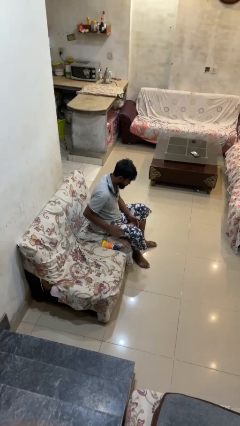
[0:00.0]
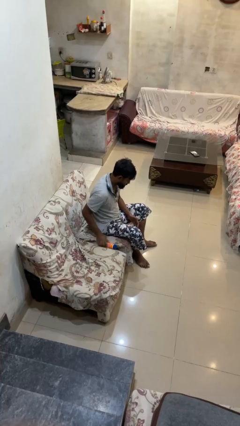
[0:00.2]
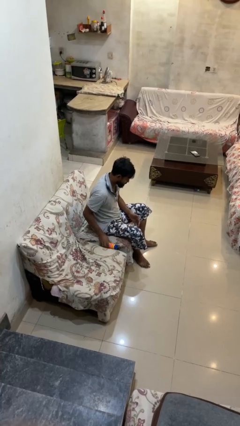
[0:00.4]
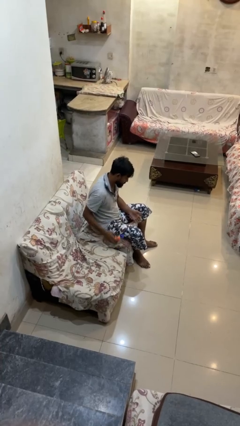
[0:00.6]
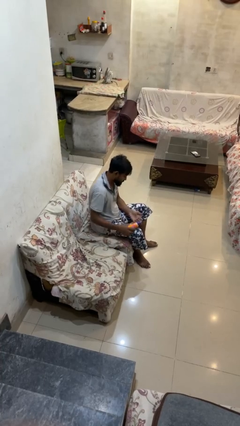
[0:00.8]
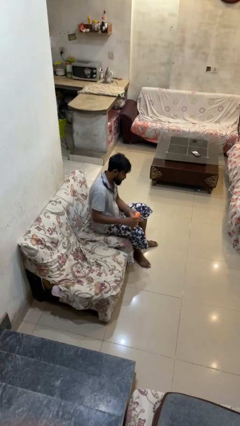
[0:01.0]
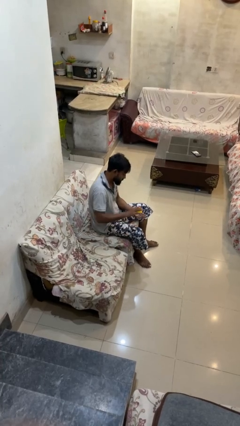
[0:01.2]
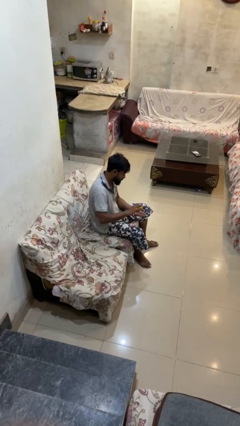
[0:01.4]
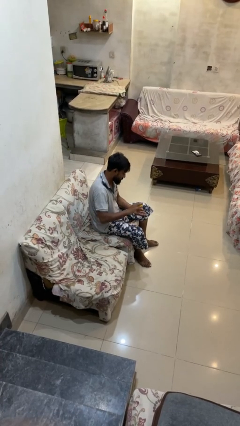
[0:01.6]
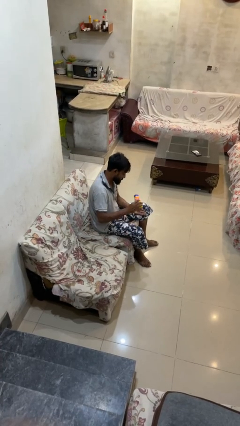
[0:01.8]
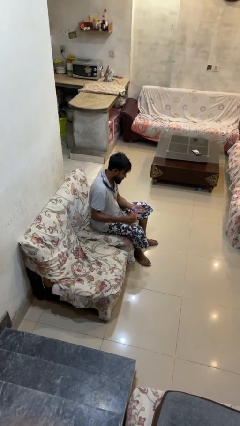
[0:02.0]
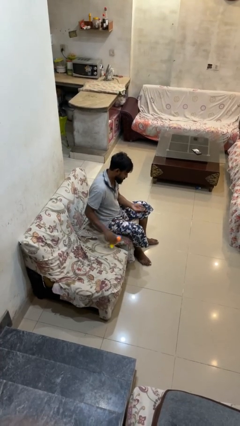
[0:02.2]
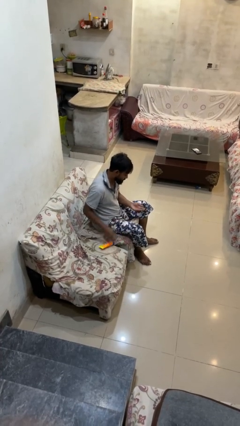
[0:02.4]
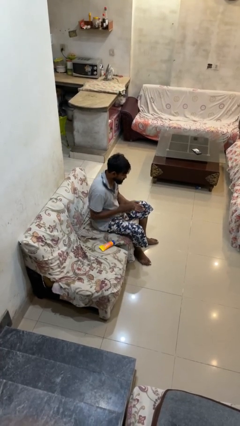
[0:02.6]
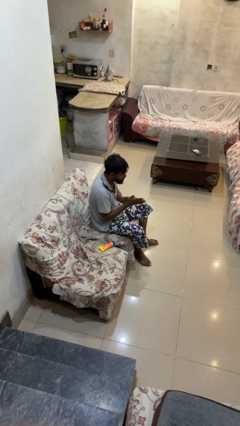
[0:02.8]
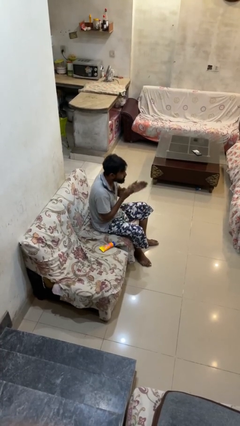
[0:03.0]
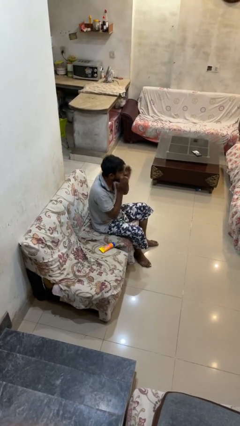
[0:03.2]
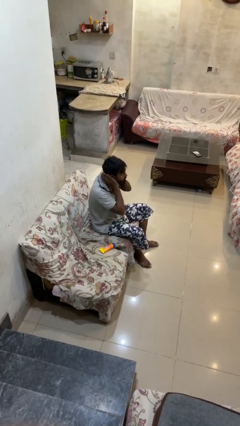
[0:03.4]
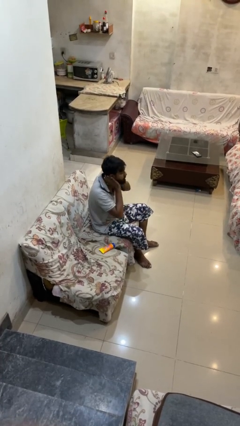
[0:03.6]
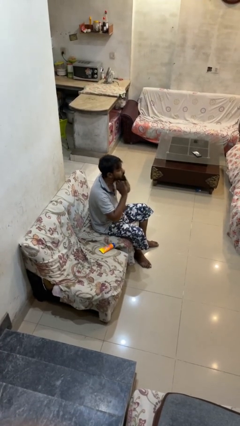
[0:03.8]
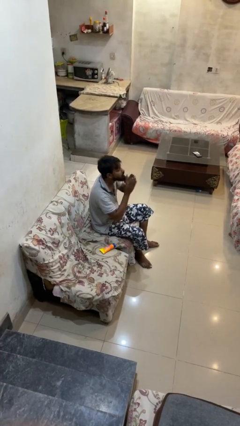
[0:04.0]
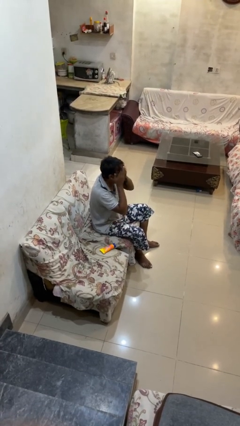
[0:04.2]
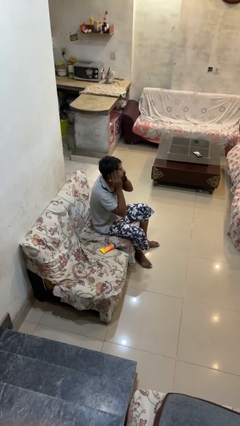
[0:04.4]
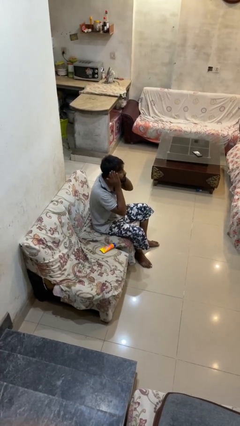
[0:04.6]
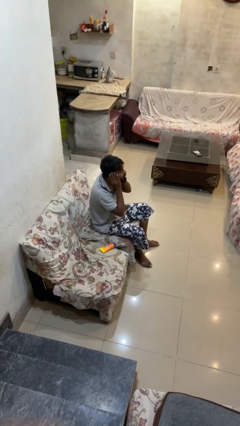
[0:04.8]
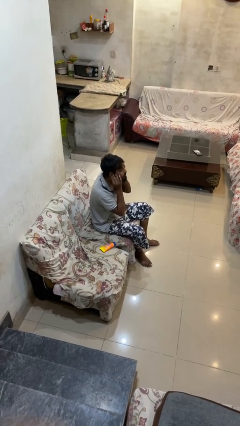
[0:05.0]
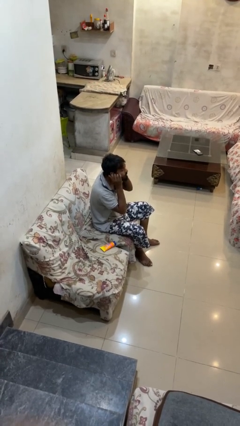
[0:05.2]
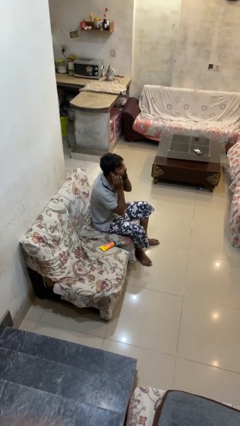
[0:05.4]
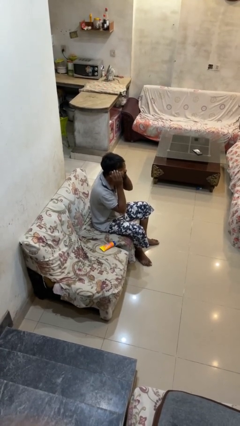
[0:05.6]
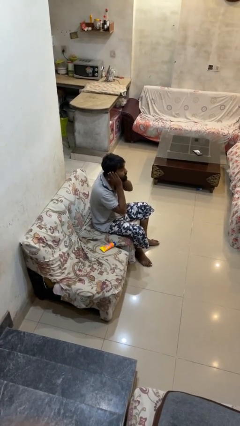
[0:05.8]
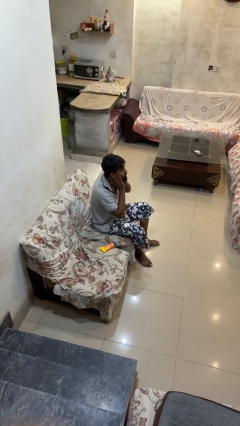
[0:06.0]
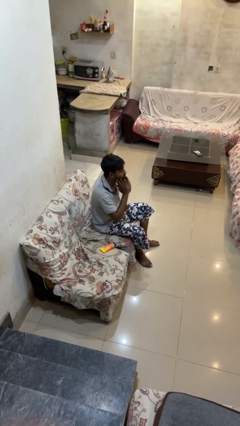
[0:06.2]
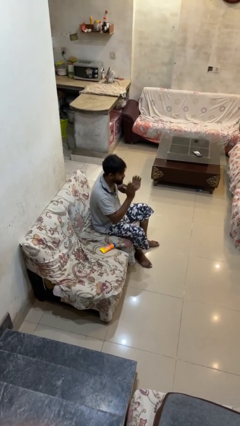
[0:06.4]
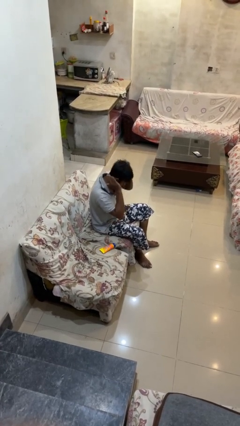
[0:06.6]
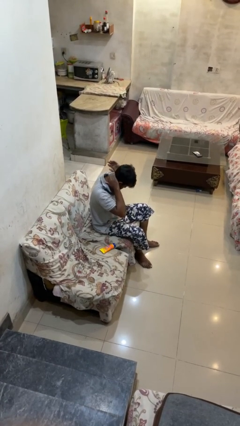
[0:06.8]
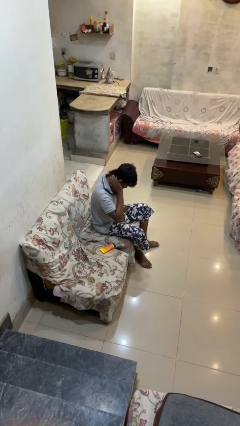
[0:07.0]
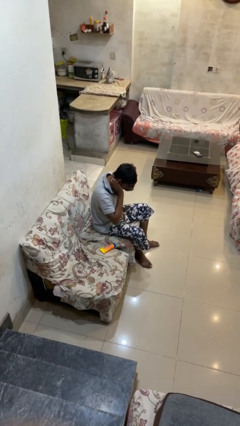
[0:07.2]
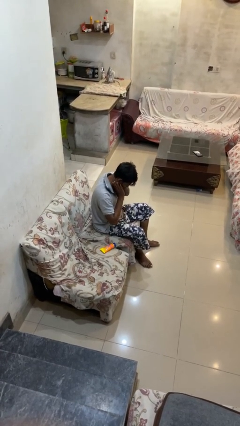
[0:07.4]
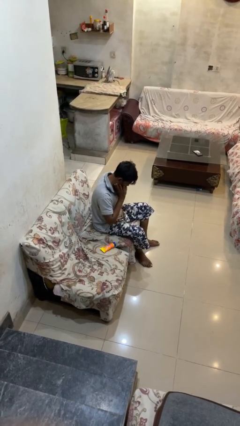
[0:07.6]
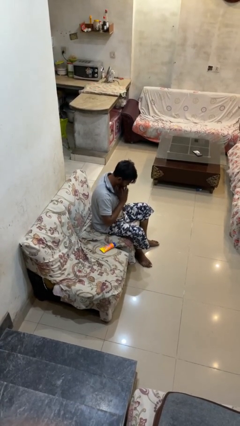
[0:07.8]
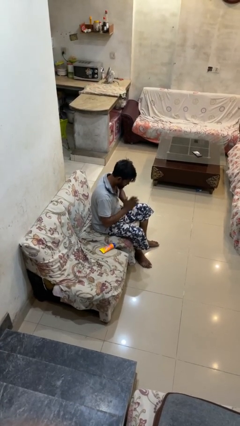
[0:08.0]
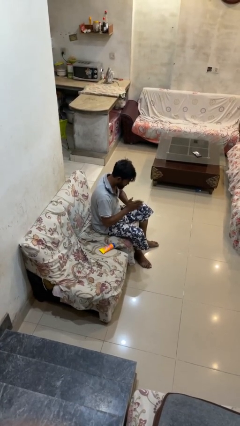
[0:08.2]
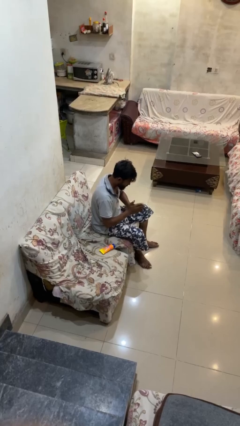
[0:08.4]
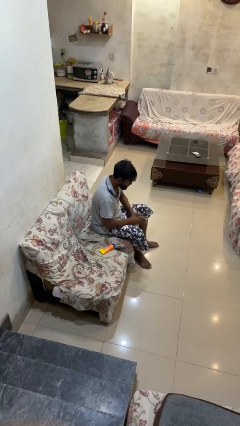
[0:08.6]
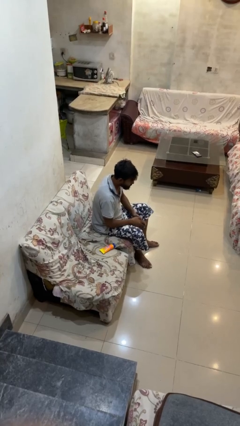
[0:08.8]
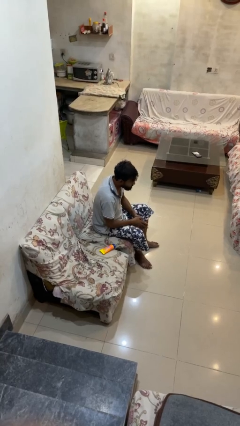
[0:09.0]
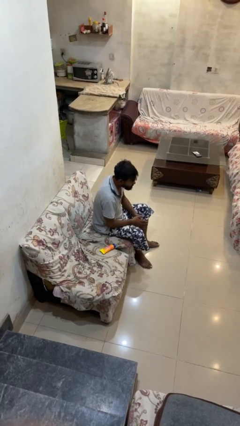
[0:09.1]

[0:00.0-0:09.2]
person applies facial moisturizer

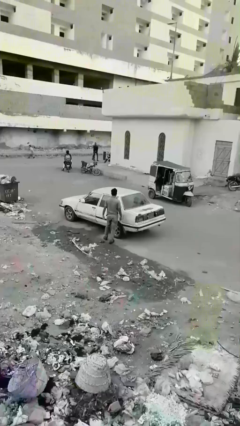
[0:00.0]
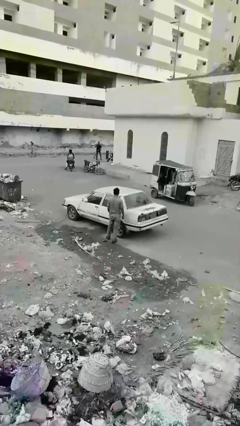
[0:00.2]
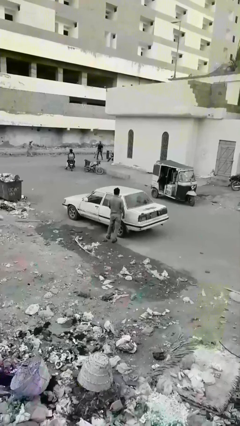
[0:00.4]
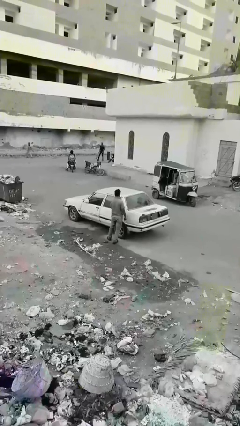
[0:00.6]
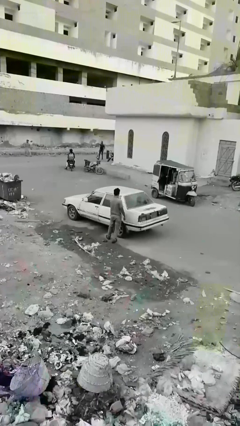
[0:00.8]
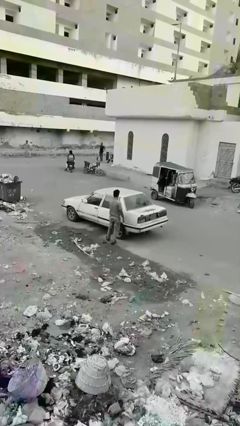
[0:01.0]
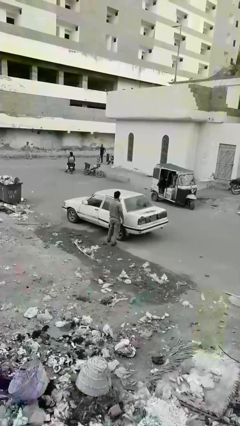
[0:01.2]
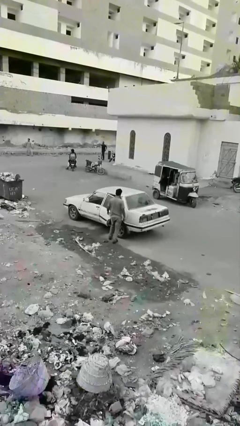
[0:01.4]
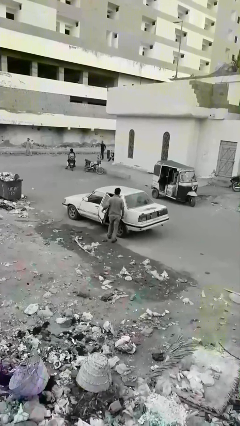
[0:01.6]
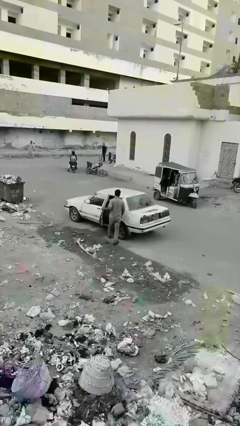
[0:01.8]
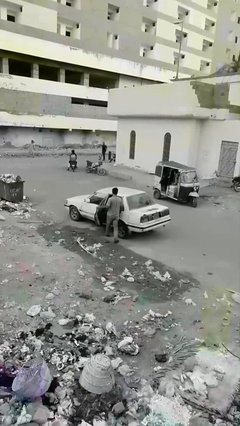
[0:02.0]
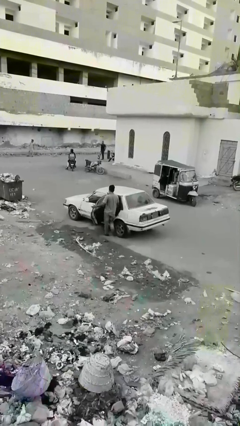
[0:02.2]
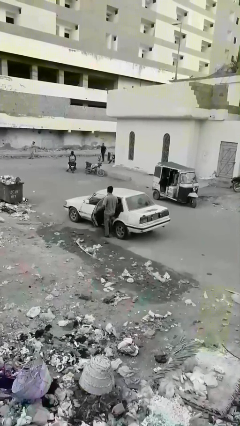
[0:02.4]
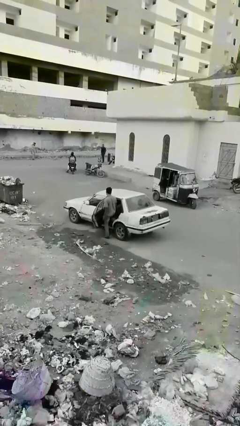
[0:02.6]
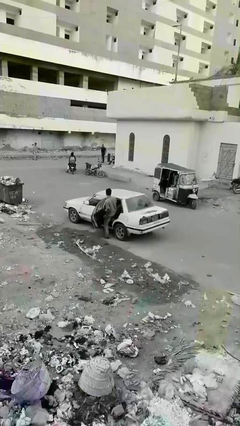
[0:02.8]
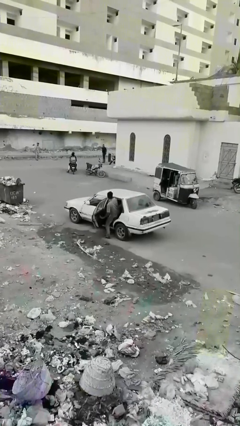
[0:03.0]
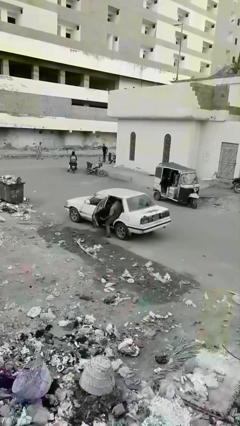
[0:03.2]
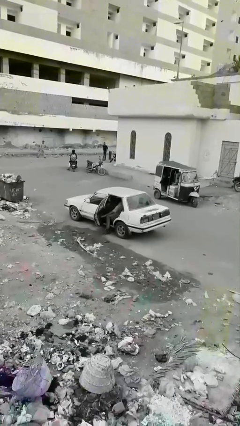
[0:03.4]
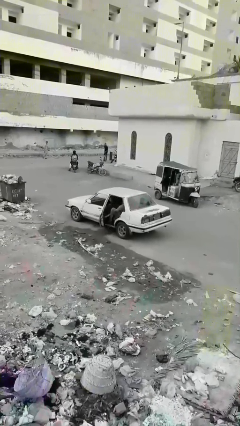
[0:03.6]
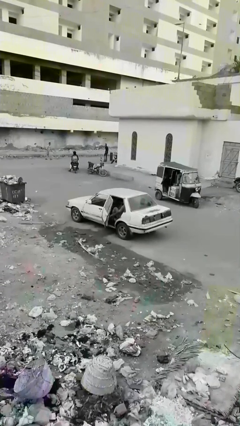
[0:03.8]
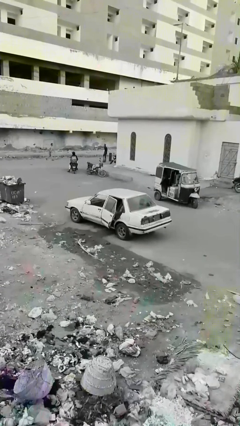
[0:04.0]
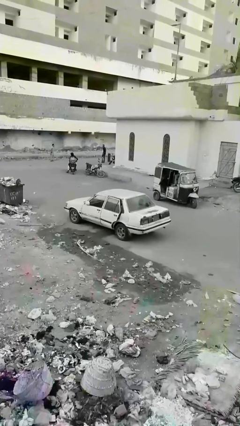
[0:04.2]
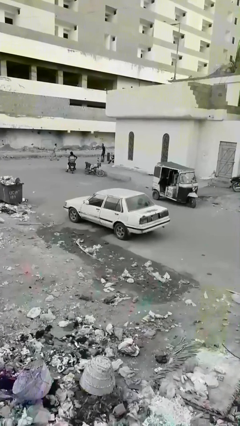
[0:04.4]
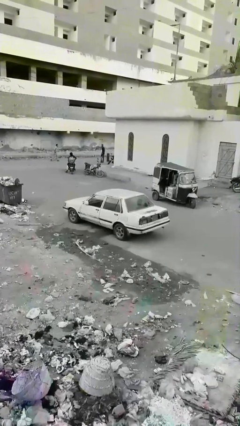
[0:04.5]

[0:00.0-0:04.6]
car picks up person

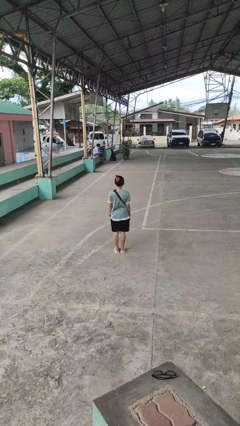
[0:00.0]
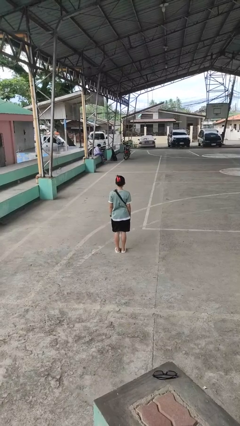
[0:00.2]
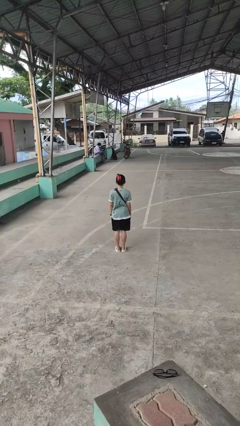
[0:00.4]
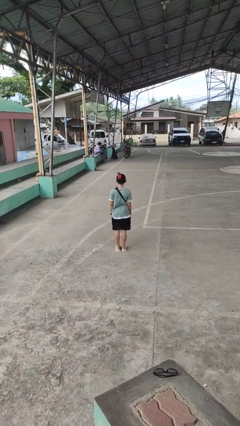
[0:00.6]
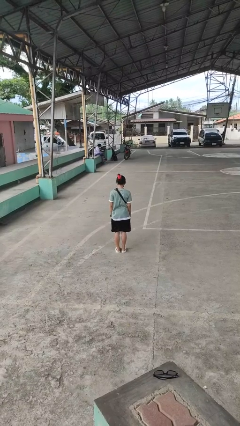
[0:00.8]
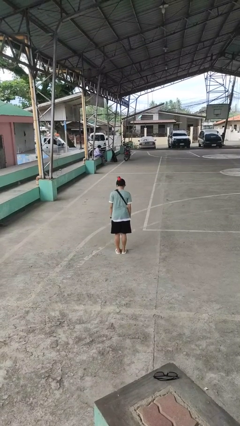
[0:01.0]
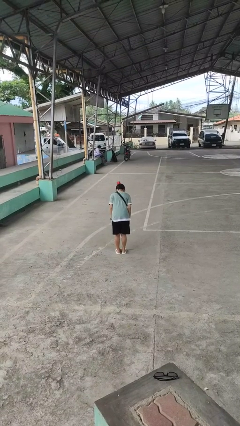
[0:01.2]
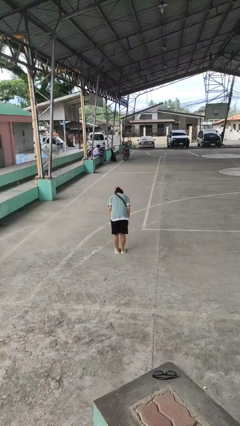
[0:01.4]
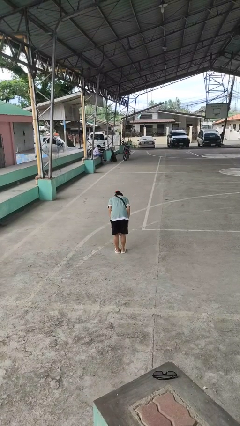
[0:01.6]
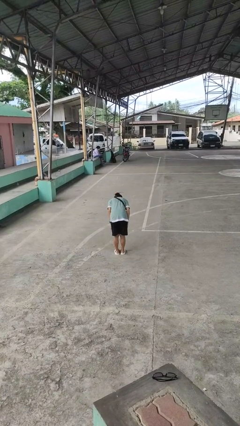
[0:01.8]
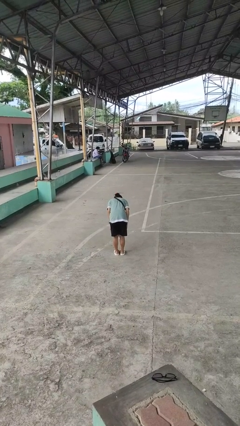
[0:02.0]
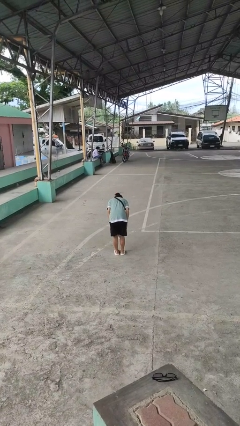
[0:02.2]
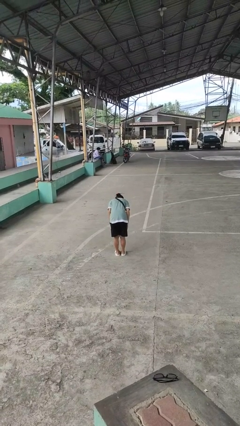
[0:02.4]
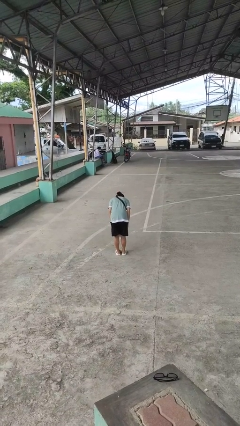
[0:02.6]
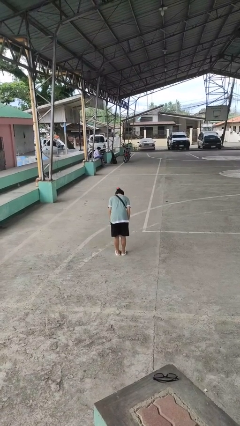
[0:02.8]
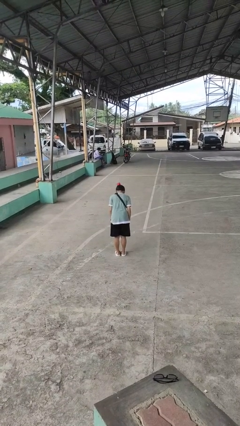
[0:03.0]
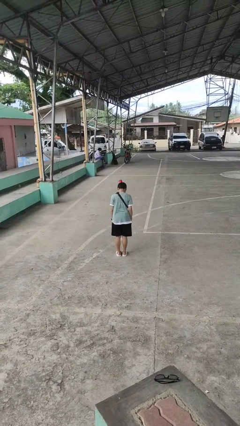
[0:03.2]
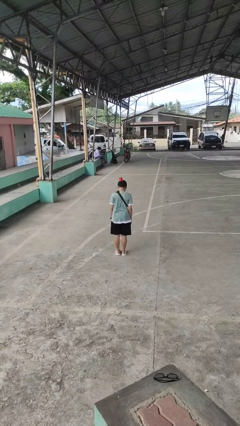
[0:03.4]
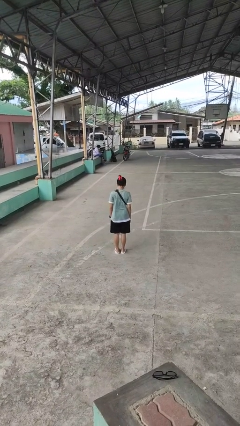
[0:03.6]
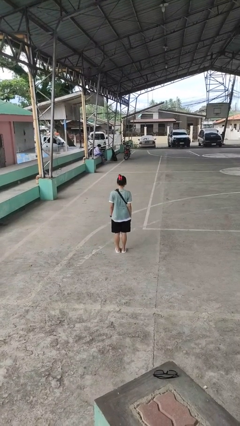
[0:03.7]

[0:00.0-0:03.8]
person bows

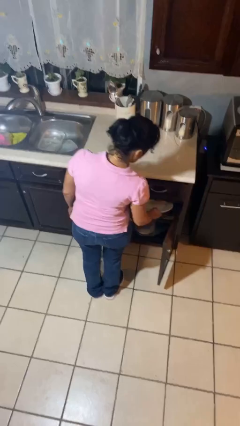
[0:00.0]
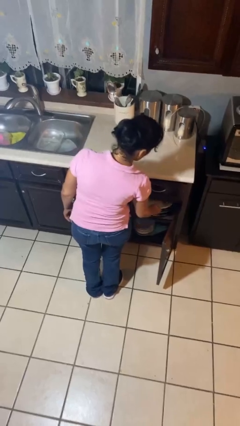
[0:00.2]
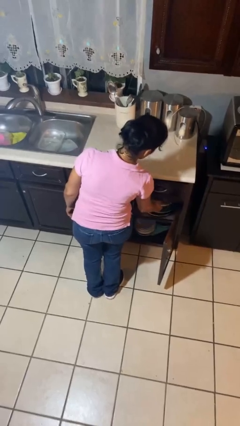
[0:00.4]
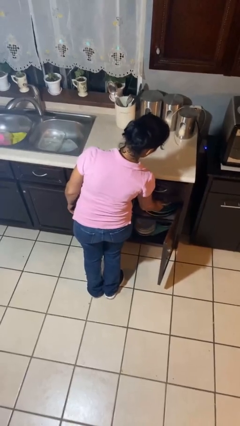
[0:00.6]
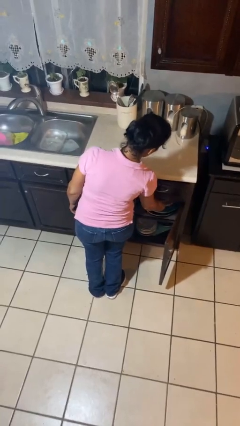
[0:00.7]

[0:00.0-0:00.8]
person takes object from cabinet
